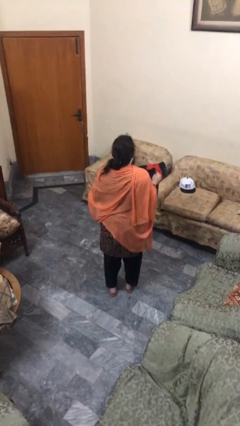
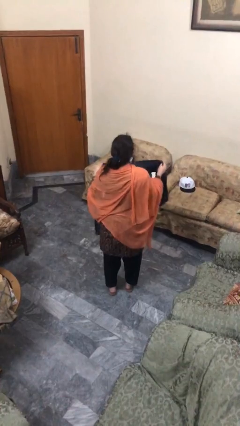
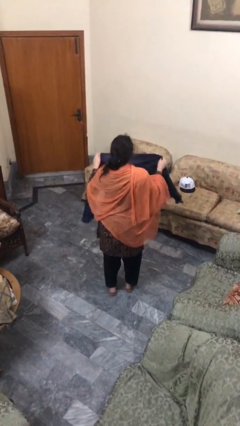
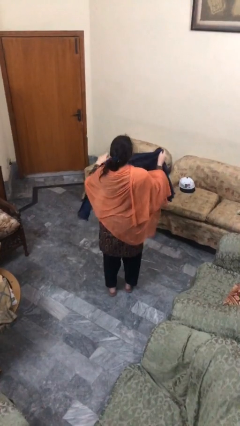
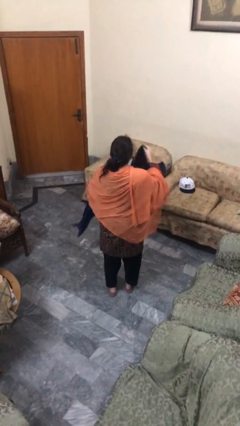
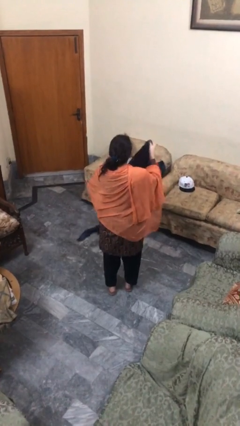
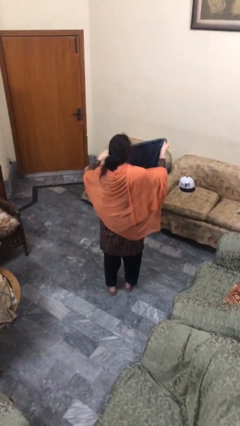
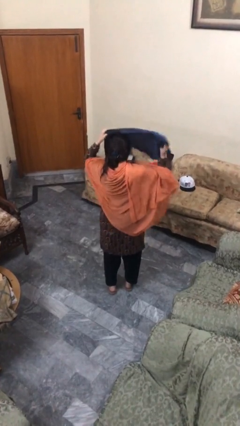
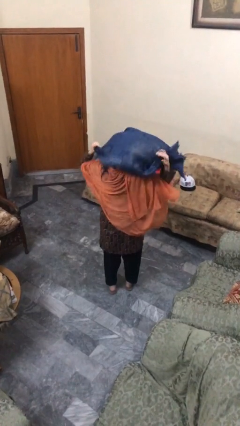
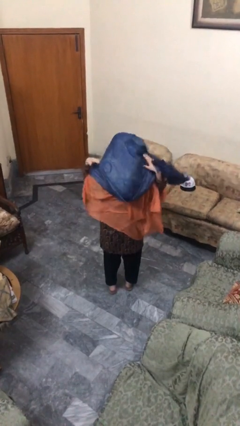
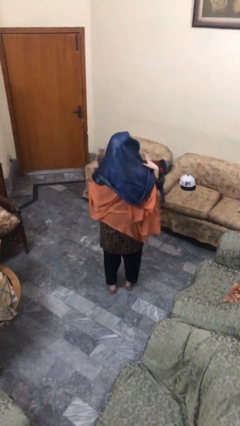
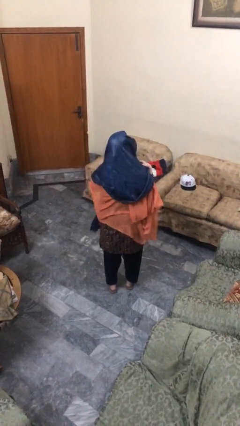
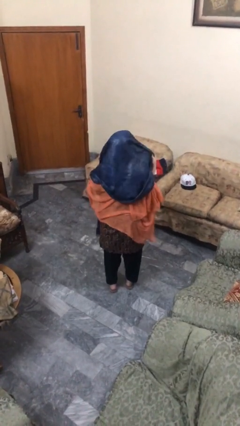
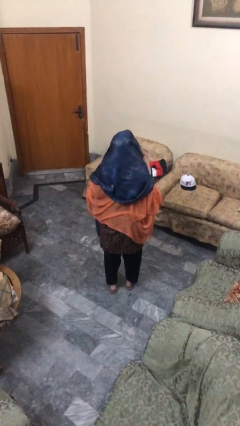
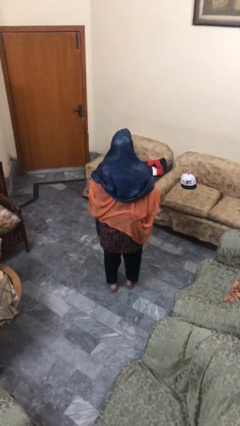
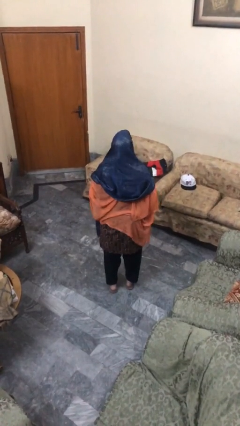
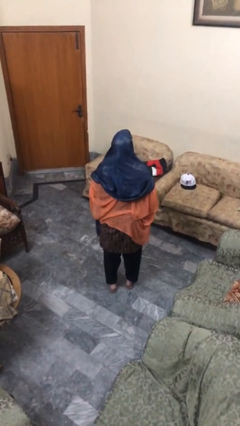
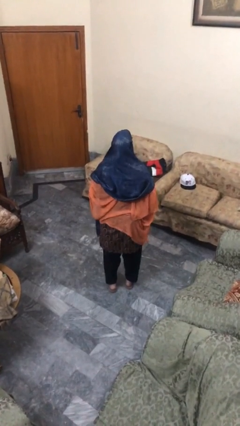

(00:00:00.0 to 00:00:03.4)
person puts on scarf

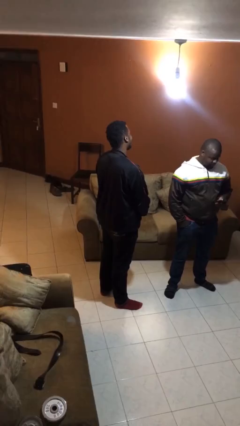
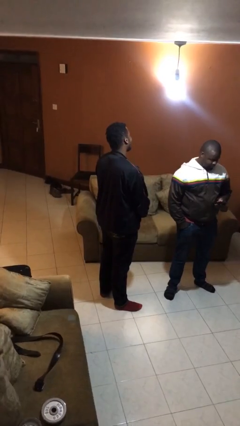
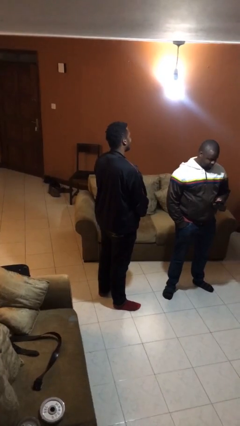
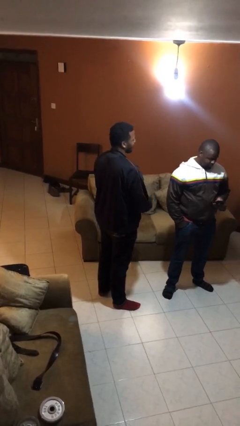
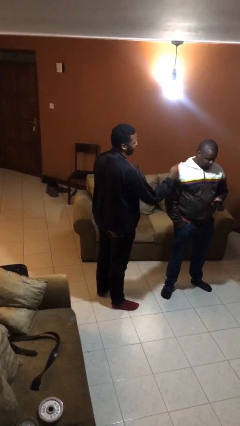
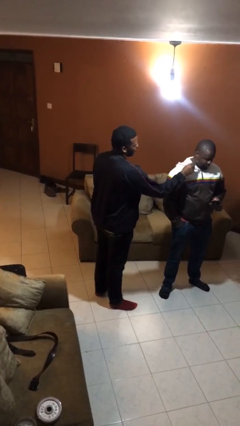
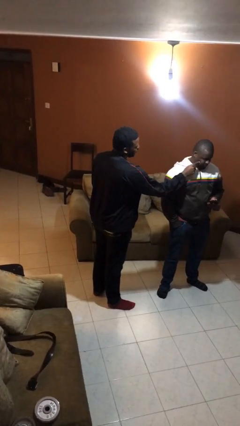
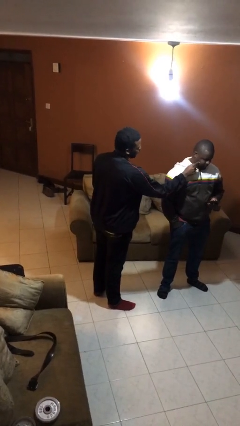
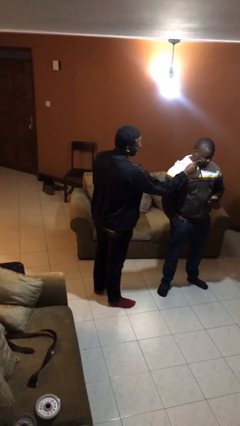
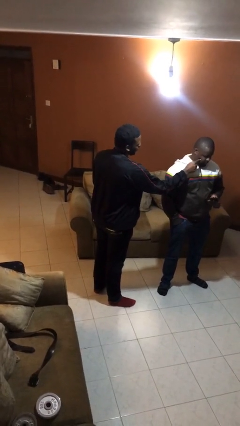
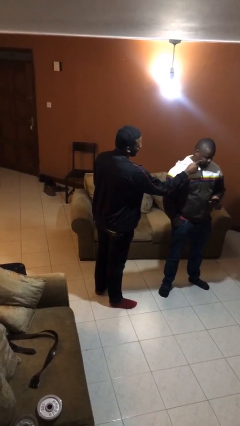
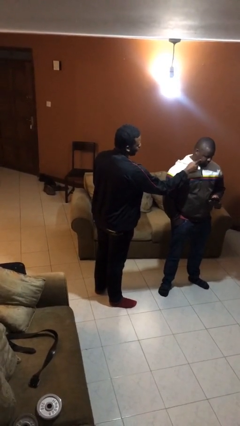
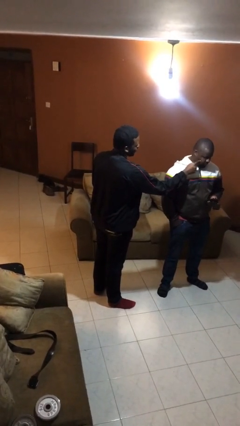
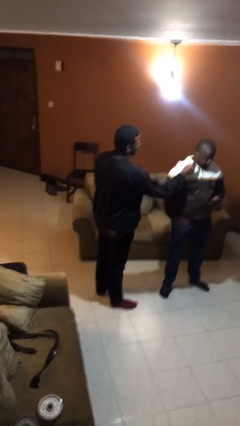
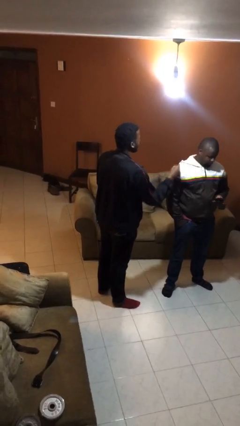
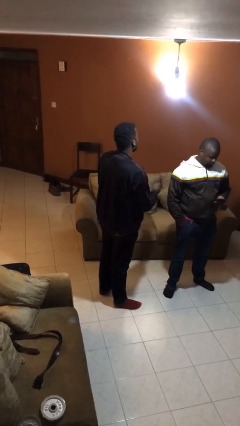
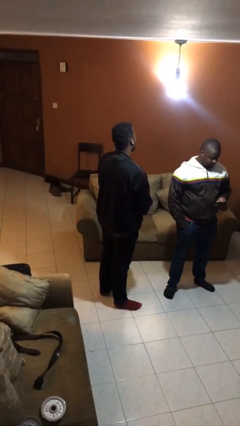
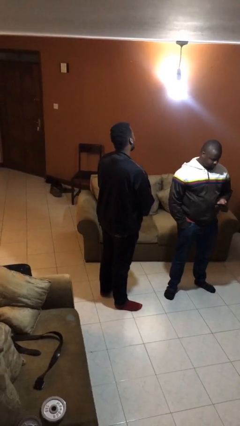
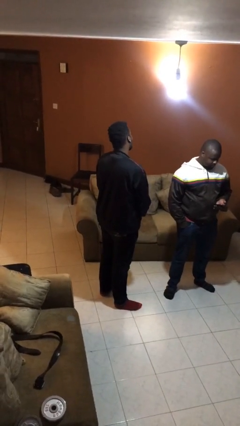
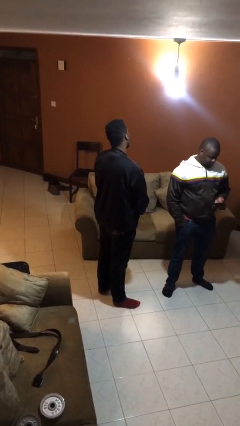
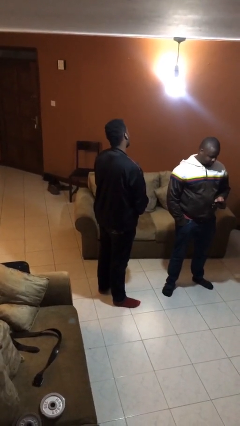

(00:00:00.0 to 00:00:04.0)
person touches face of person

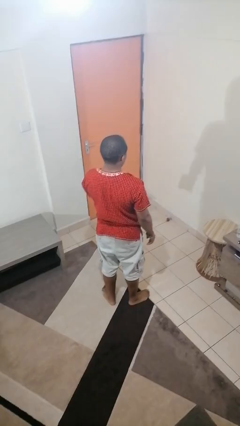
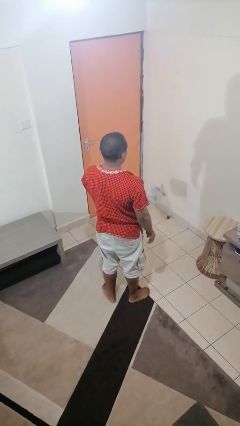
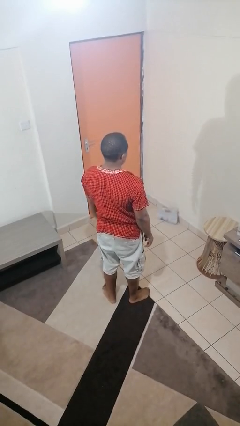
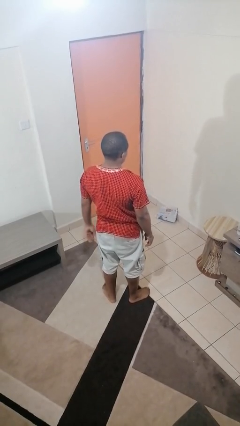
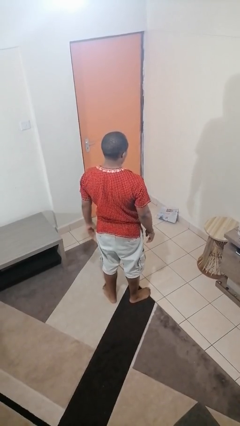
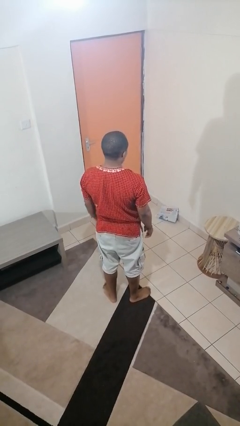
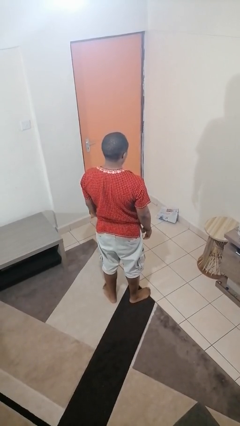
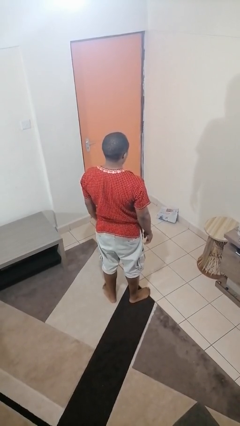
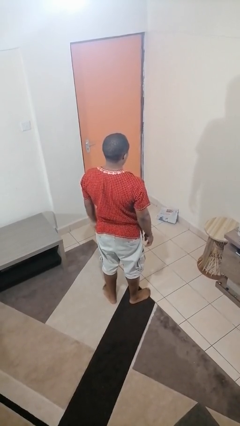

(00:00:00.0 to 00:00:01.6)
person throws object to ground

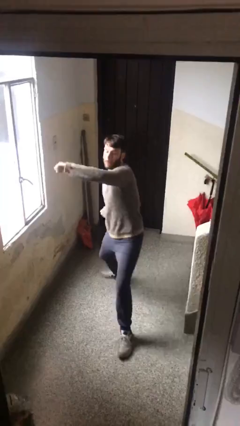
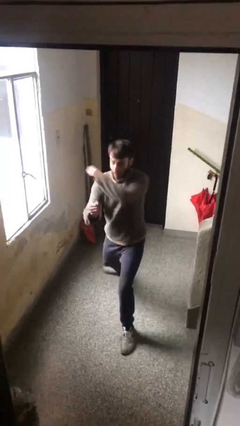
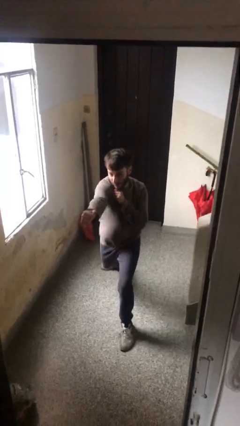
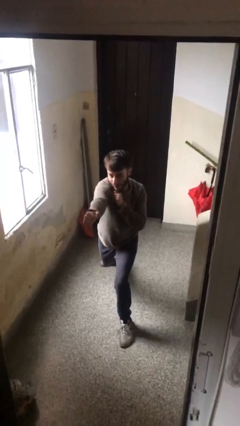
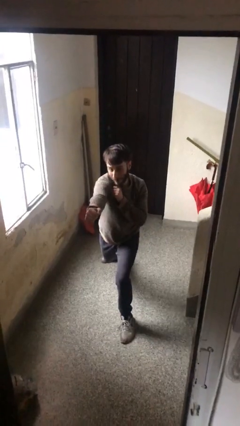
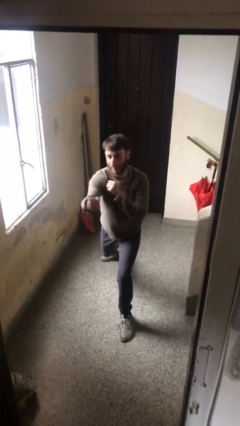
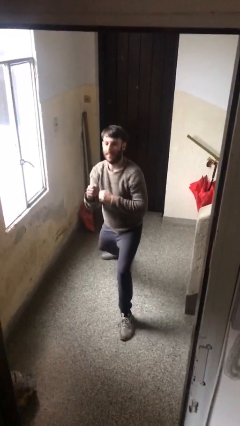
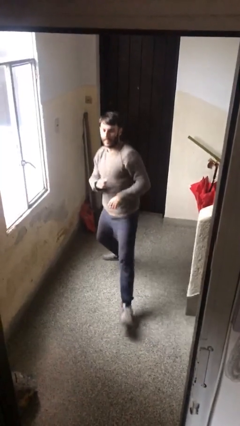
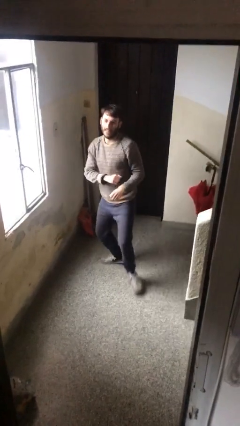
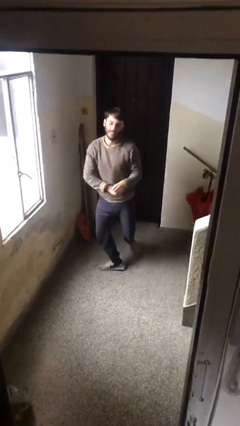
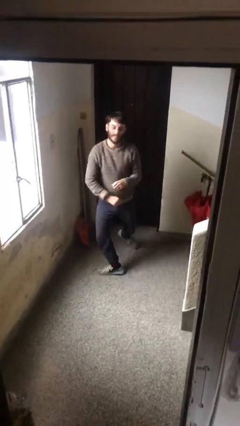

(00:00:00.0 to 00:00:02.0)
person karate chop

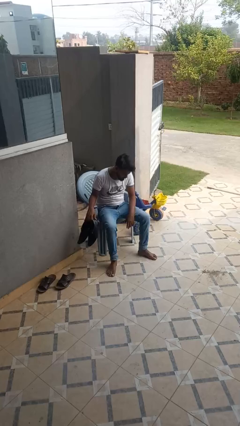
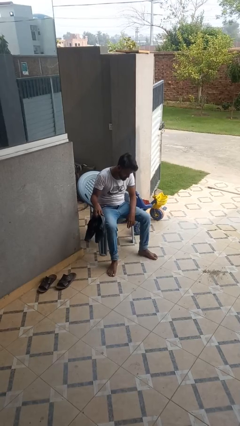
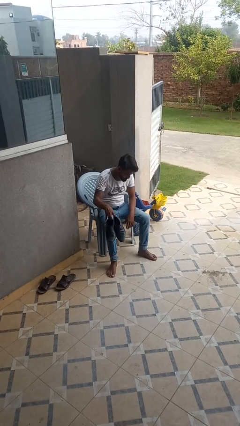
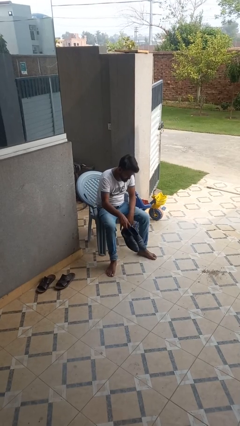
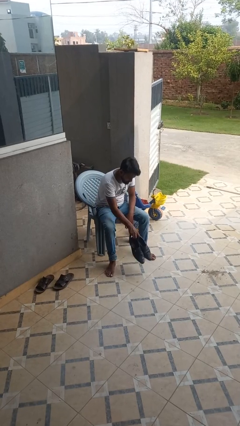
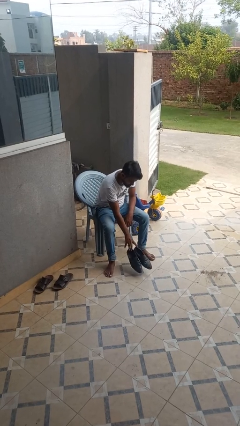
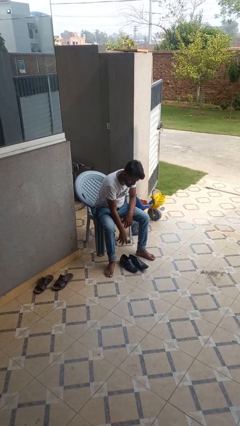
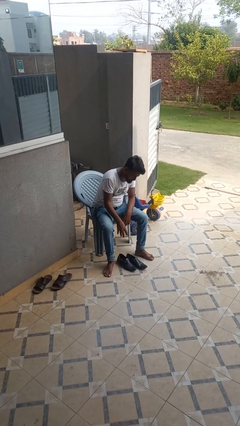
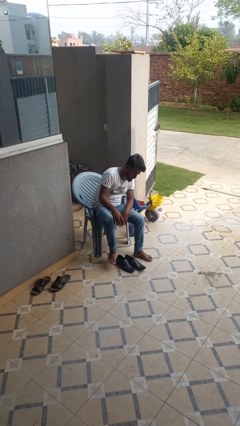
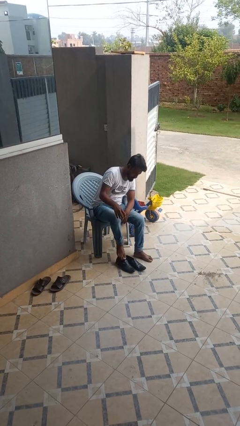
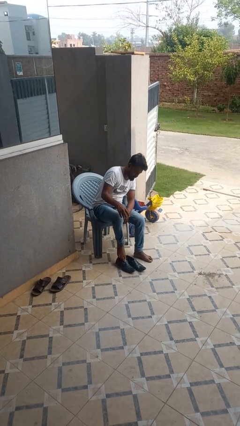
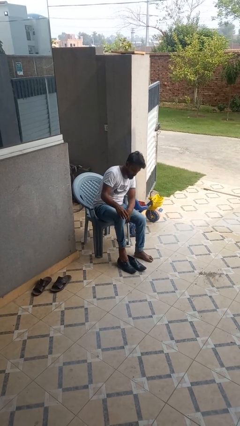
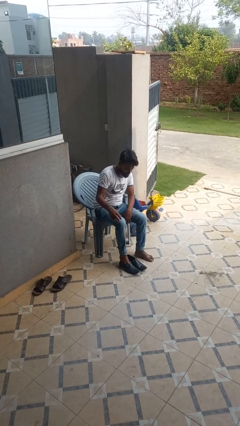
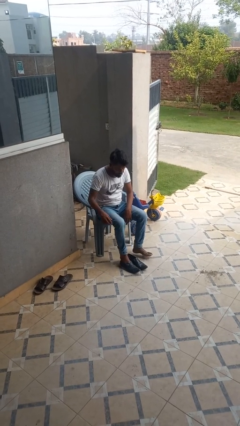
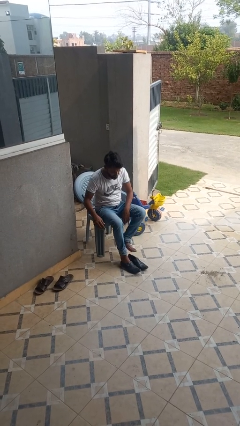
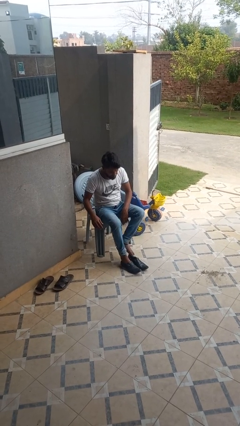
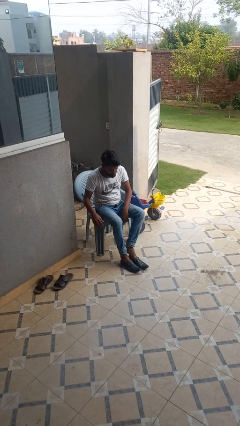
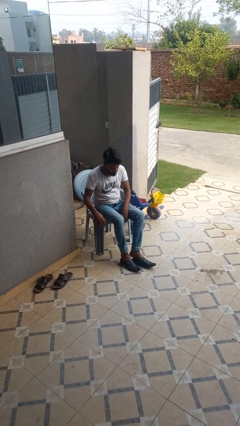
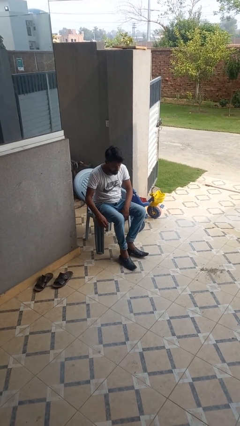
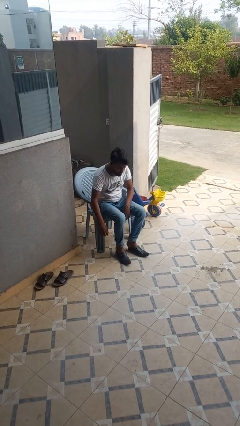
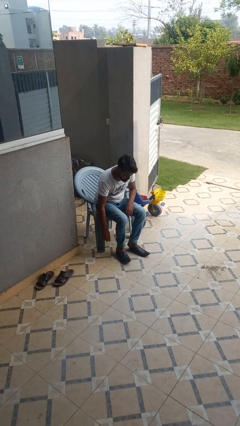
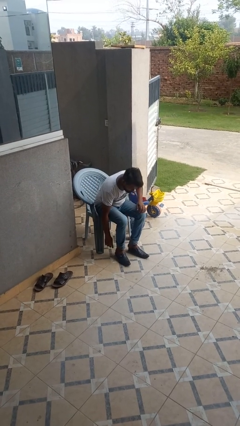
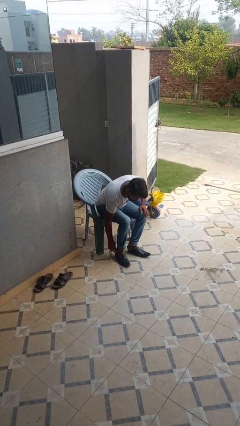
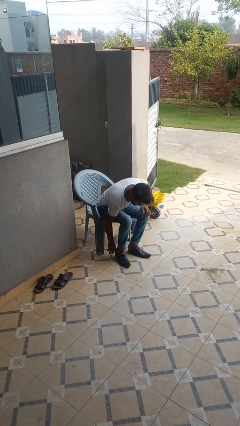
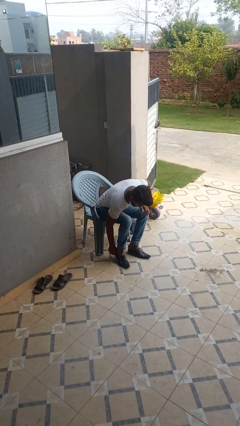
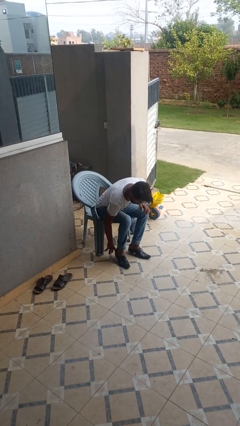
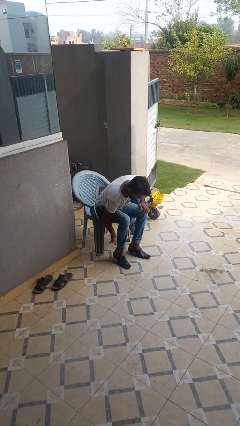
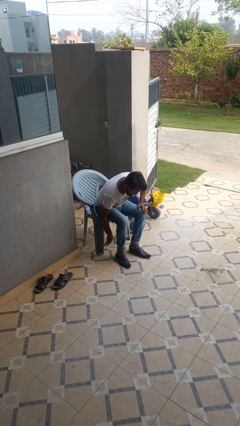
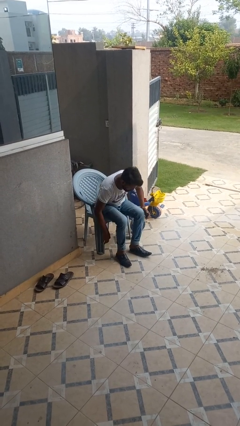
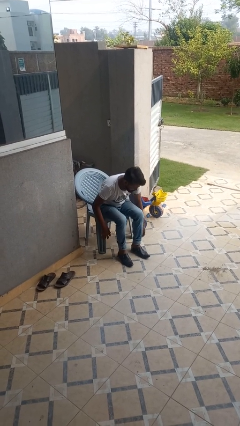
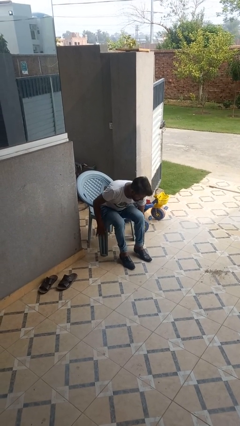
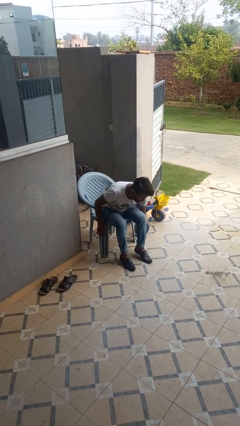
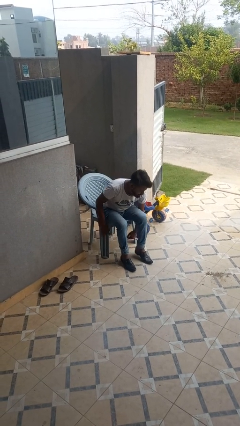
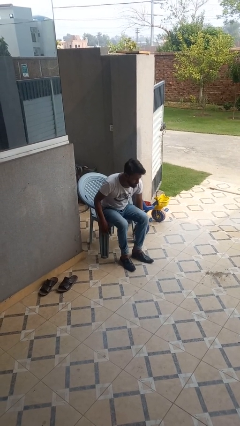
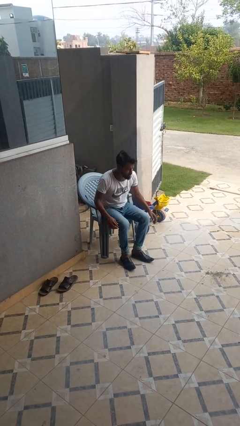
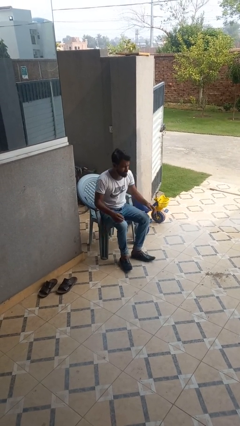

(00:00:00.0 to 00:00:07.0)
person puts on shoes
